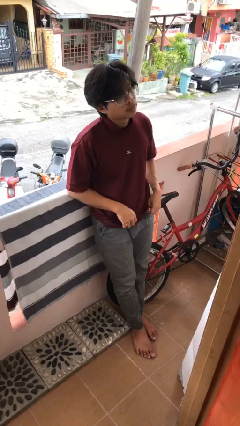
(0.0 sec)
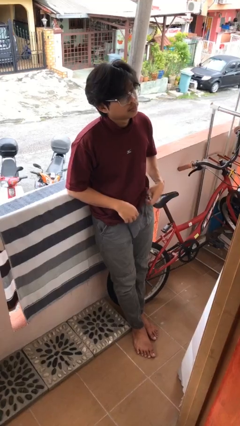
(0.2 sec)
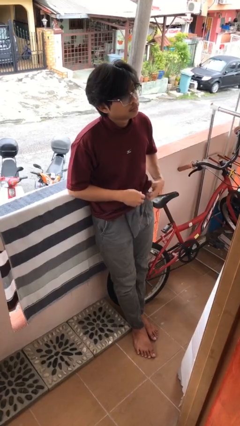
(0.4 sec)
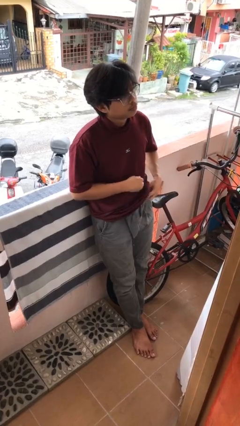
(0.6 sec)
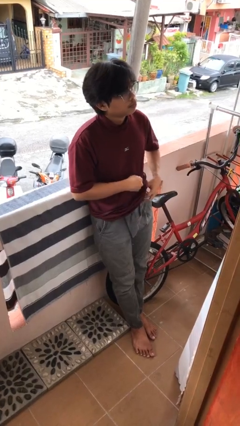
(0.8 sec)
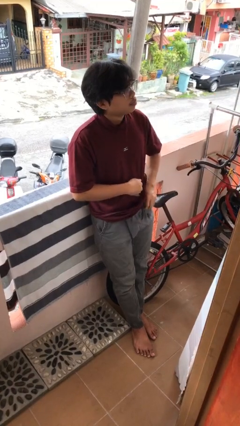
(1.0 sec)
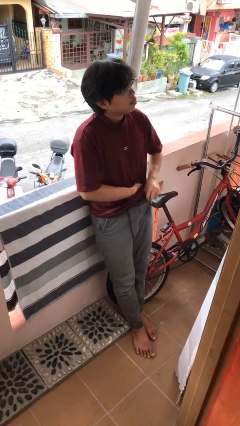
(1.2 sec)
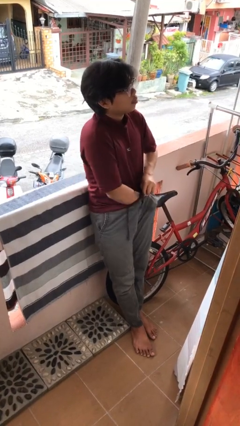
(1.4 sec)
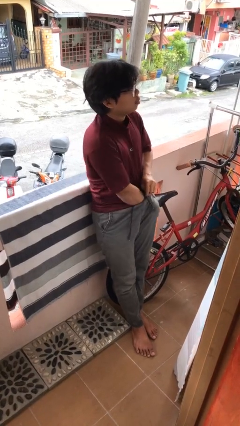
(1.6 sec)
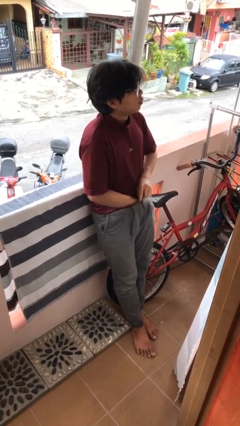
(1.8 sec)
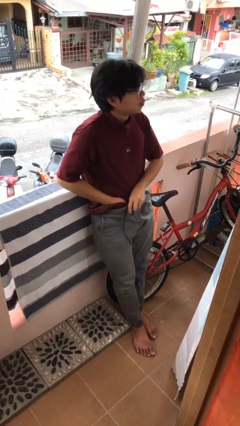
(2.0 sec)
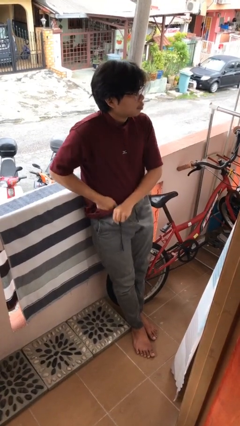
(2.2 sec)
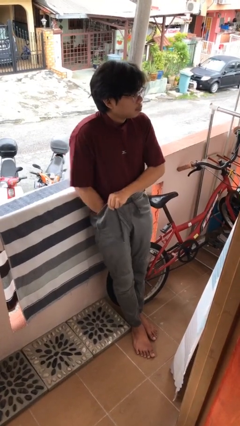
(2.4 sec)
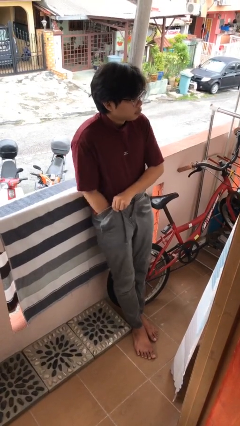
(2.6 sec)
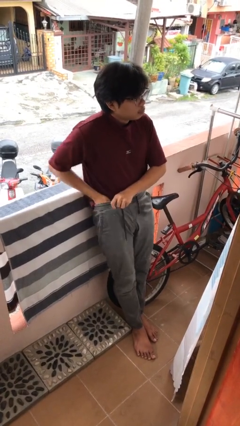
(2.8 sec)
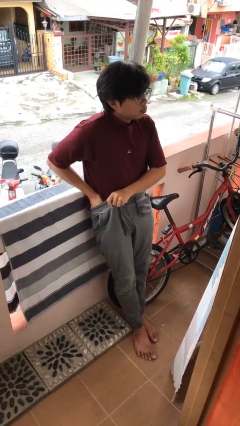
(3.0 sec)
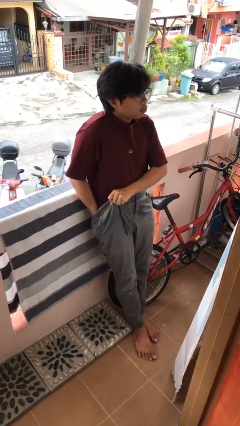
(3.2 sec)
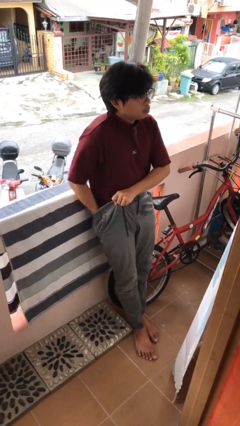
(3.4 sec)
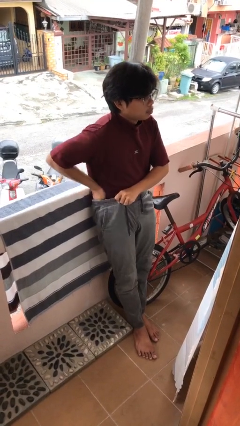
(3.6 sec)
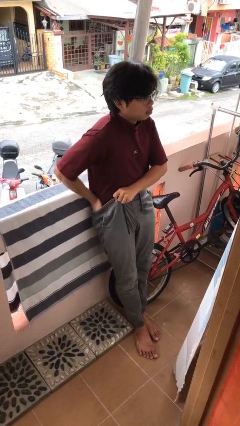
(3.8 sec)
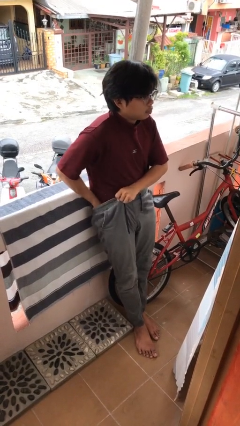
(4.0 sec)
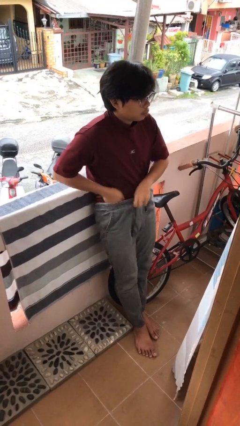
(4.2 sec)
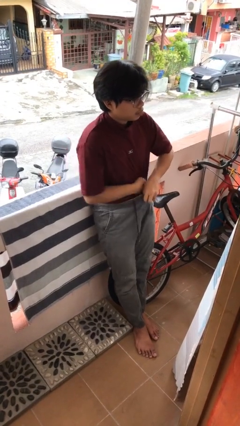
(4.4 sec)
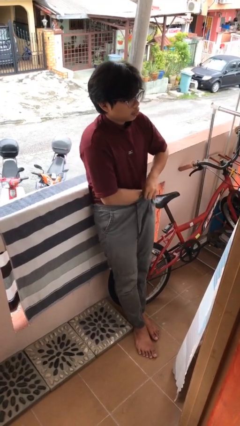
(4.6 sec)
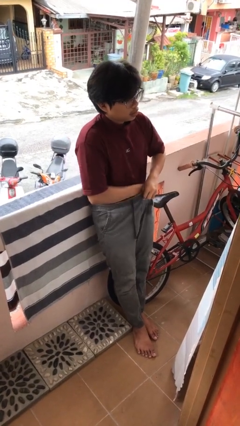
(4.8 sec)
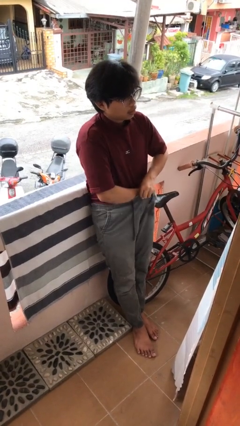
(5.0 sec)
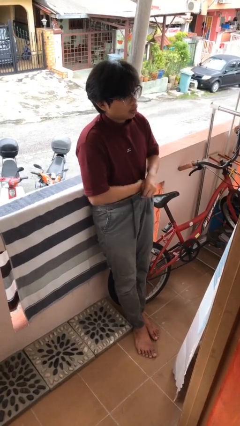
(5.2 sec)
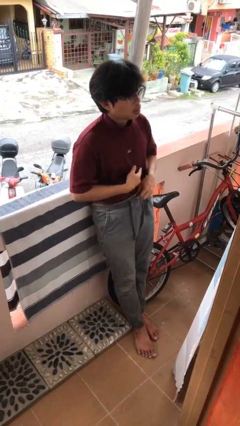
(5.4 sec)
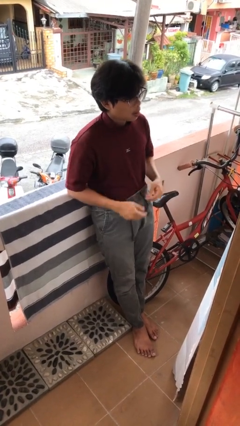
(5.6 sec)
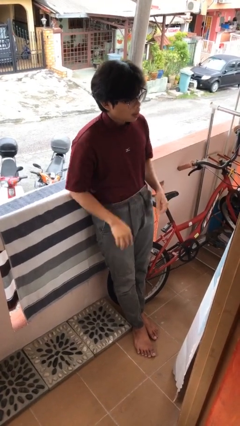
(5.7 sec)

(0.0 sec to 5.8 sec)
person tucks in shirt

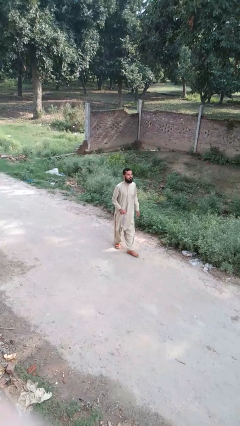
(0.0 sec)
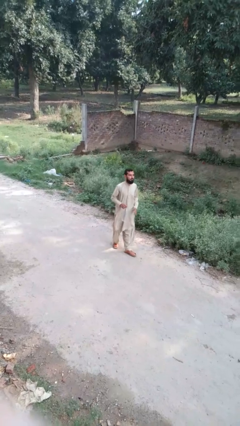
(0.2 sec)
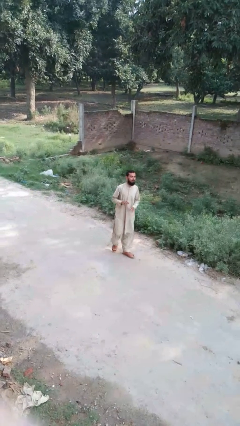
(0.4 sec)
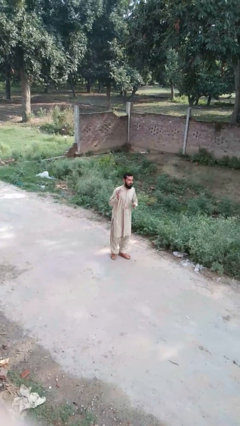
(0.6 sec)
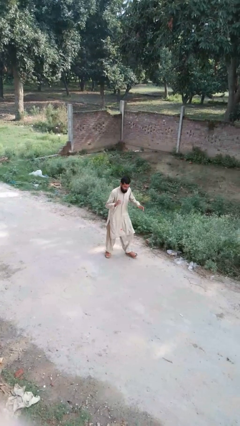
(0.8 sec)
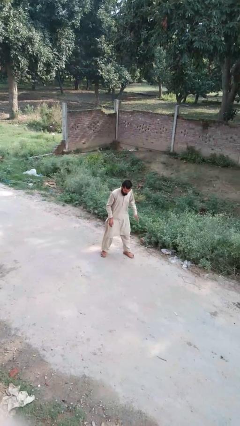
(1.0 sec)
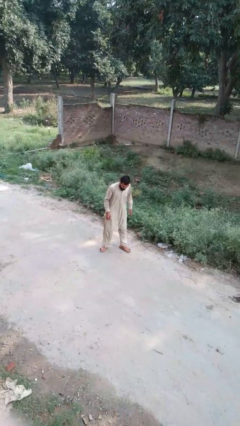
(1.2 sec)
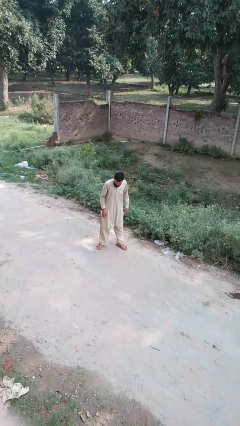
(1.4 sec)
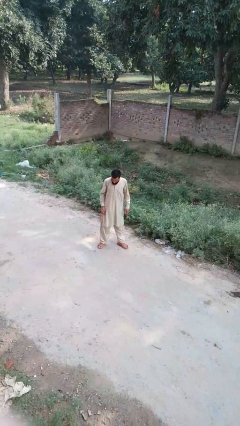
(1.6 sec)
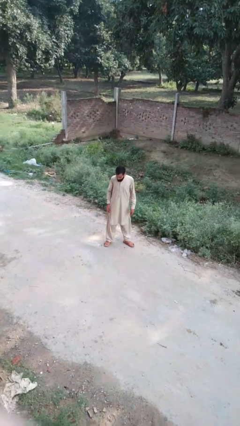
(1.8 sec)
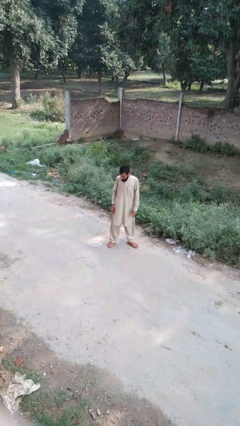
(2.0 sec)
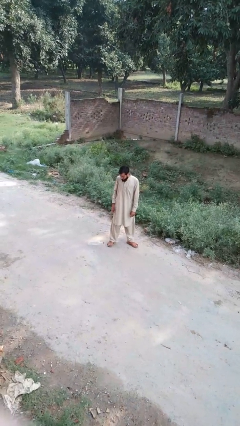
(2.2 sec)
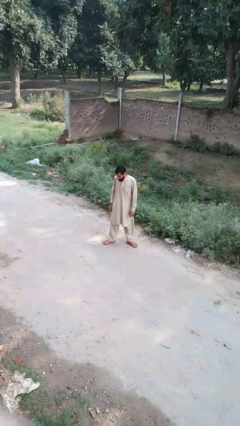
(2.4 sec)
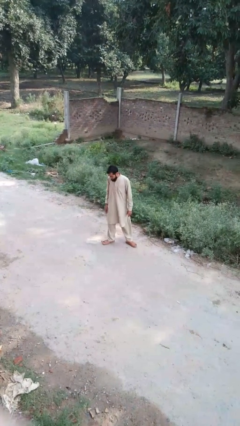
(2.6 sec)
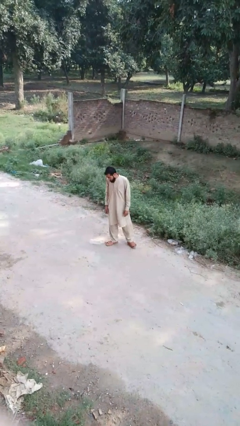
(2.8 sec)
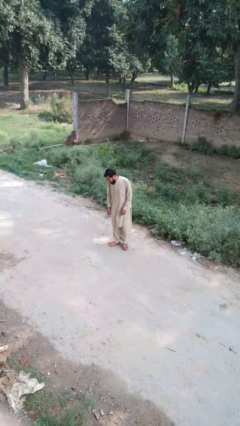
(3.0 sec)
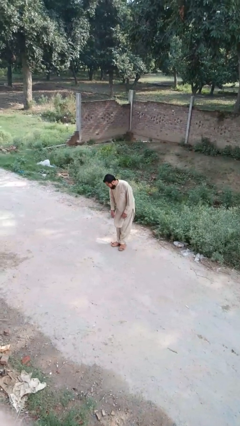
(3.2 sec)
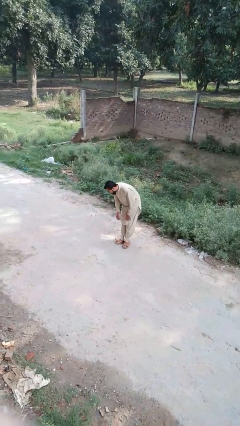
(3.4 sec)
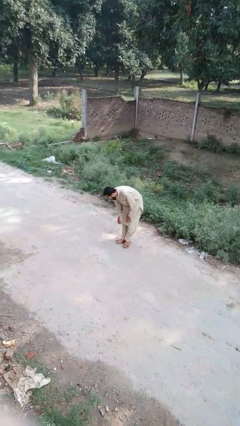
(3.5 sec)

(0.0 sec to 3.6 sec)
person drops object

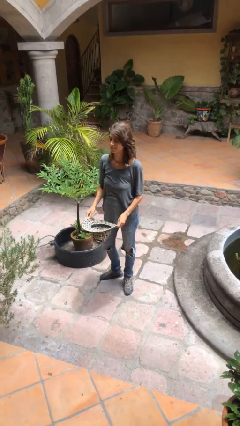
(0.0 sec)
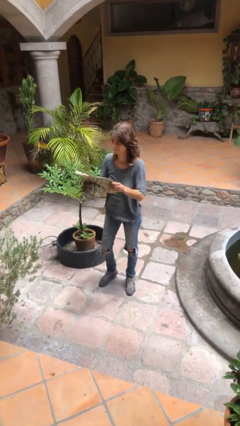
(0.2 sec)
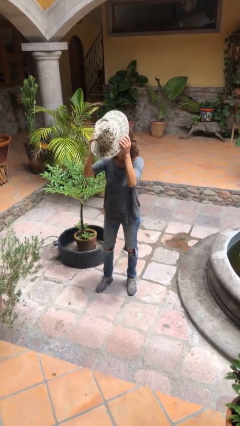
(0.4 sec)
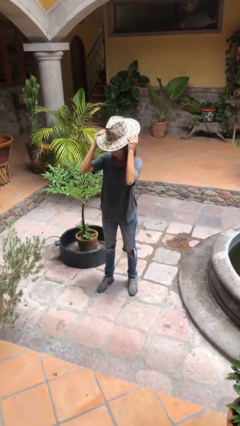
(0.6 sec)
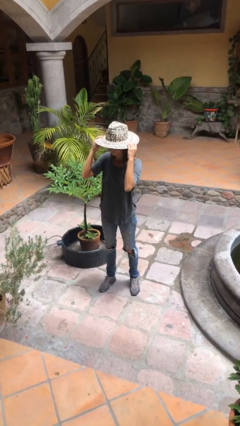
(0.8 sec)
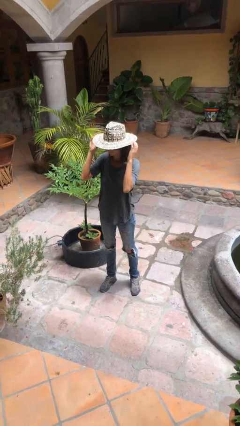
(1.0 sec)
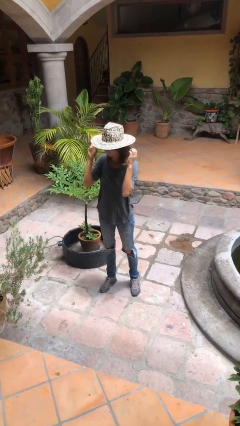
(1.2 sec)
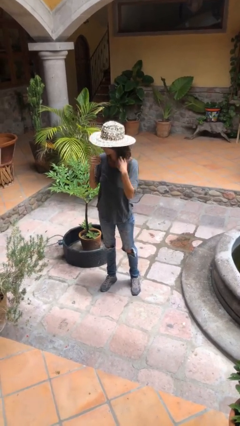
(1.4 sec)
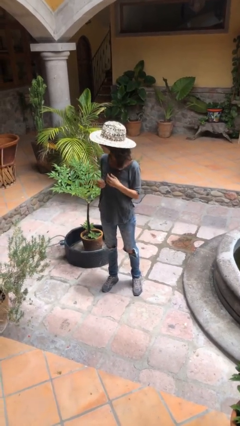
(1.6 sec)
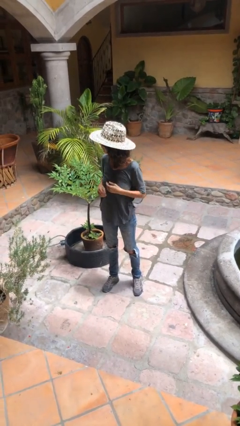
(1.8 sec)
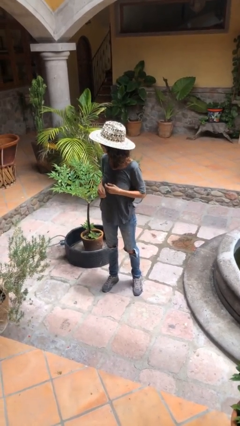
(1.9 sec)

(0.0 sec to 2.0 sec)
person puts on hat

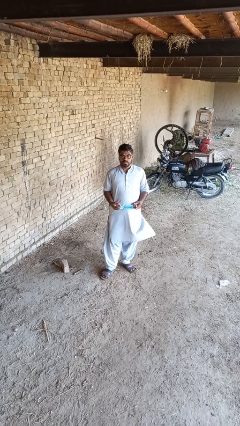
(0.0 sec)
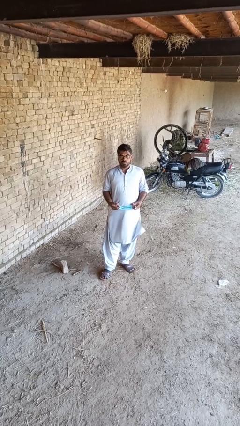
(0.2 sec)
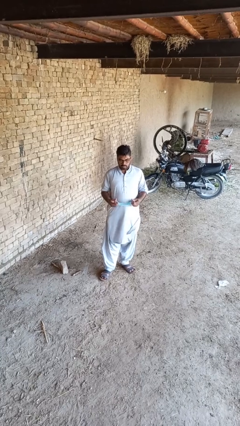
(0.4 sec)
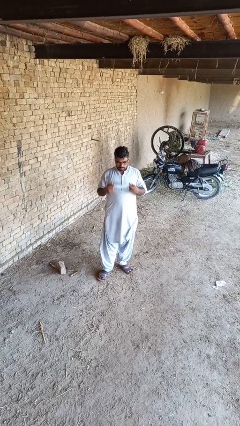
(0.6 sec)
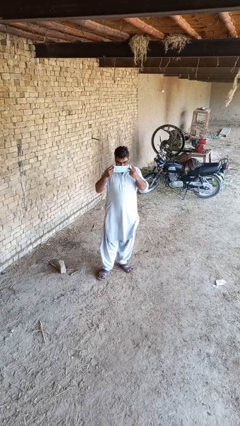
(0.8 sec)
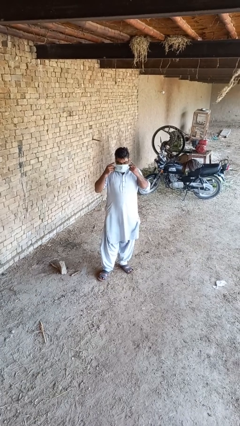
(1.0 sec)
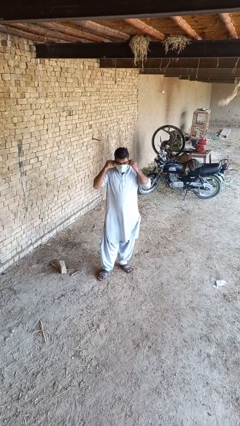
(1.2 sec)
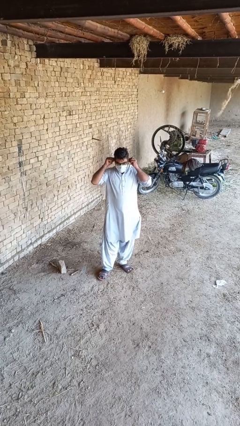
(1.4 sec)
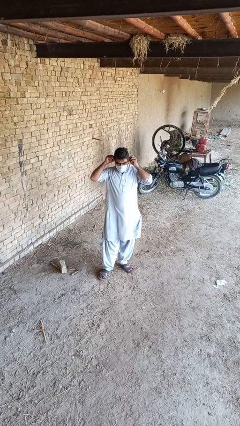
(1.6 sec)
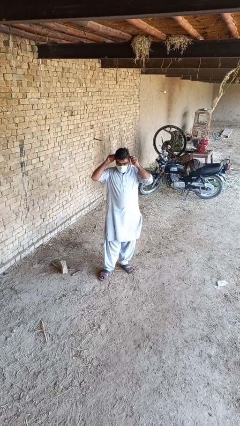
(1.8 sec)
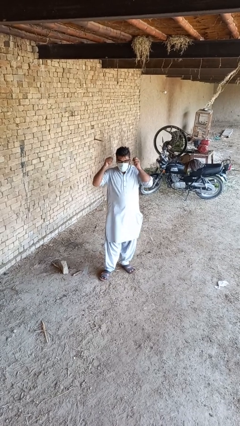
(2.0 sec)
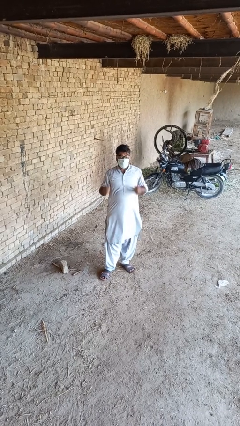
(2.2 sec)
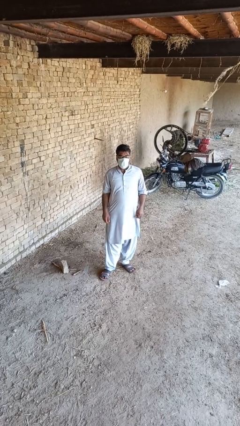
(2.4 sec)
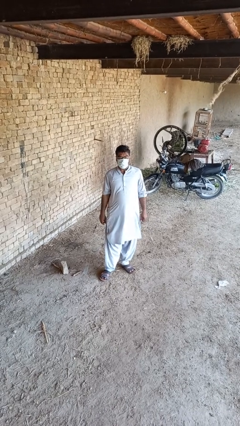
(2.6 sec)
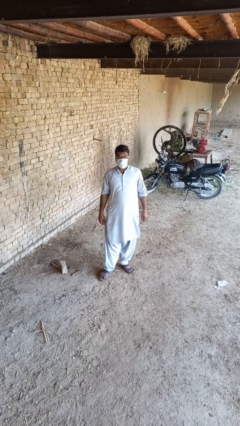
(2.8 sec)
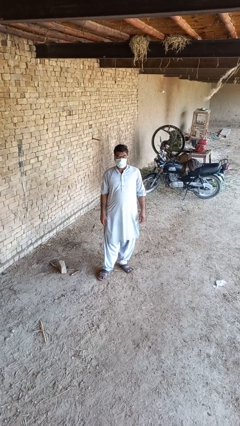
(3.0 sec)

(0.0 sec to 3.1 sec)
person puts on facemask

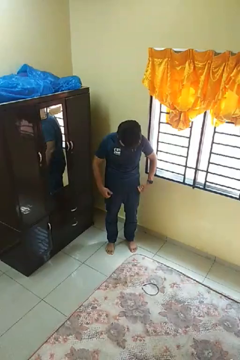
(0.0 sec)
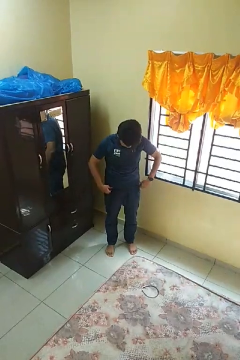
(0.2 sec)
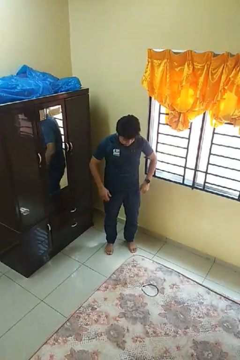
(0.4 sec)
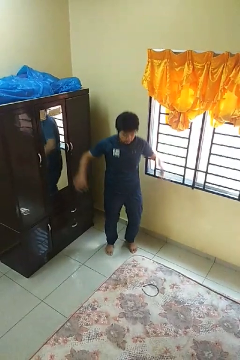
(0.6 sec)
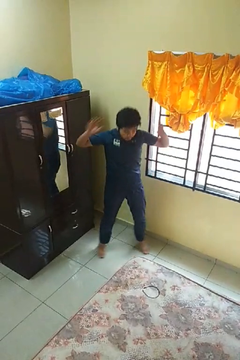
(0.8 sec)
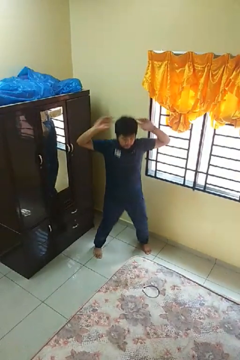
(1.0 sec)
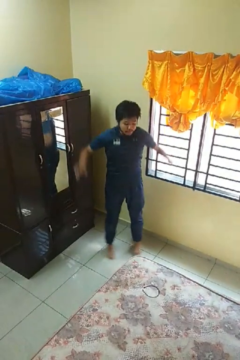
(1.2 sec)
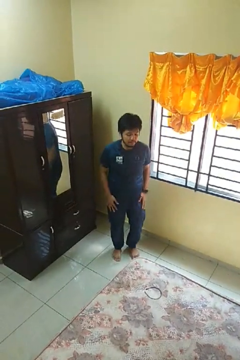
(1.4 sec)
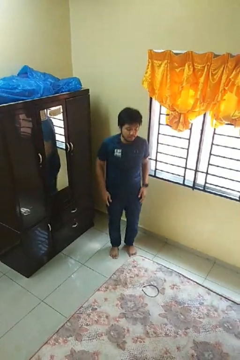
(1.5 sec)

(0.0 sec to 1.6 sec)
person exercises with jumping jacks

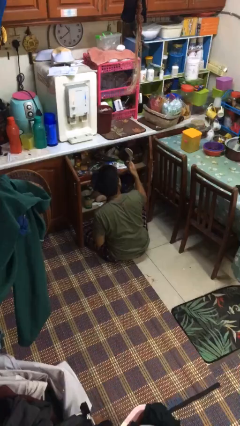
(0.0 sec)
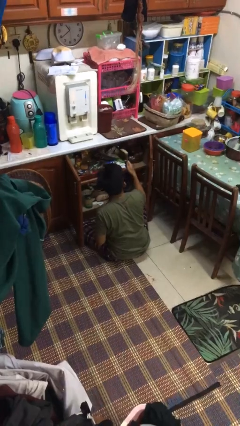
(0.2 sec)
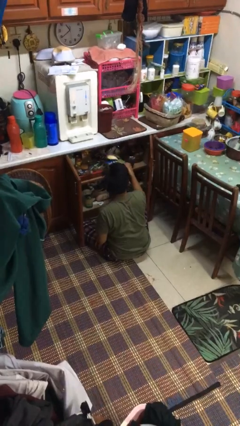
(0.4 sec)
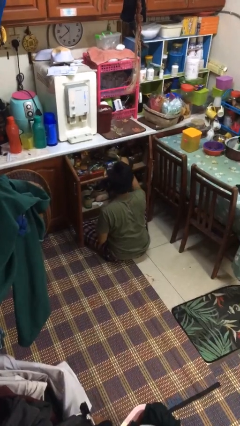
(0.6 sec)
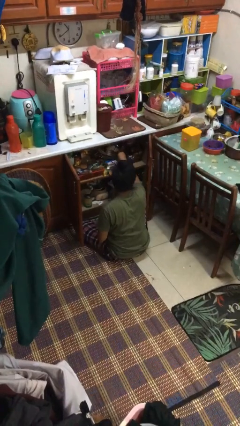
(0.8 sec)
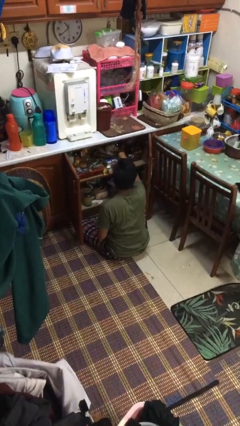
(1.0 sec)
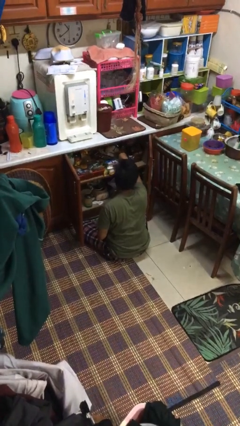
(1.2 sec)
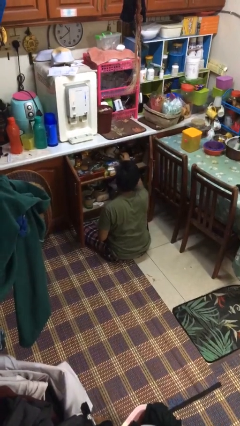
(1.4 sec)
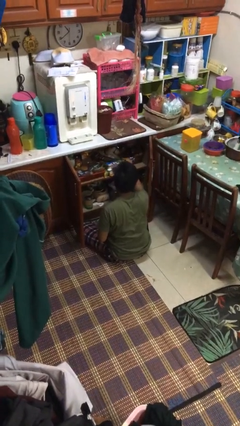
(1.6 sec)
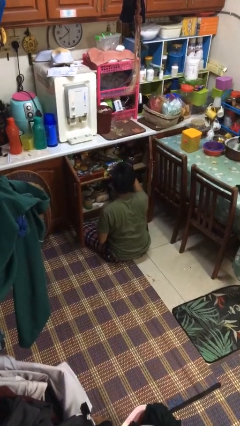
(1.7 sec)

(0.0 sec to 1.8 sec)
person puts object into kitchen drawer
